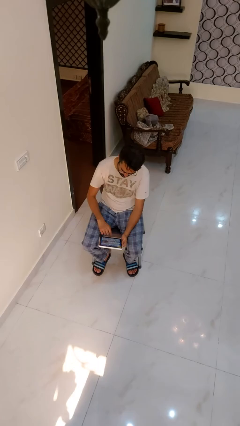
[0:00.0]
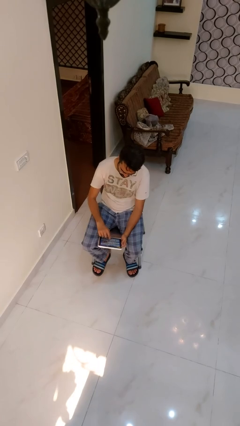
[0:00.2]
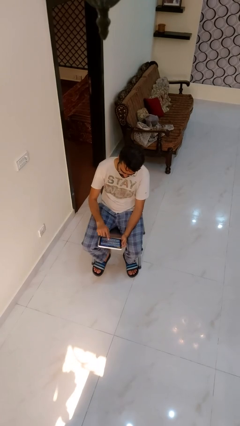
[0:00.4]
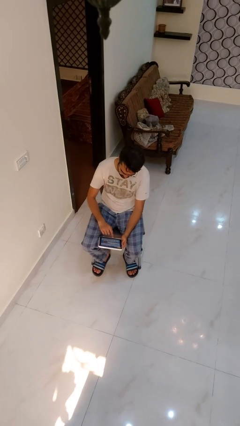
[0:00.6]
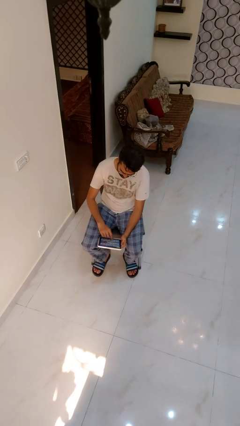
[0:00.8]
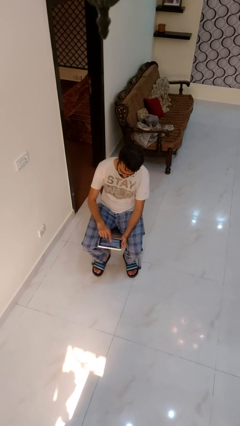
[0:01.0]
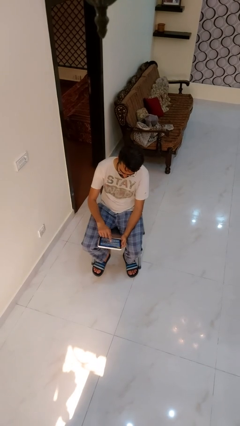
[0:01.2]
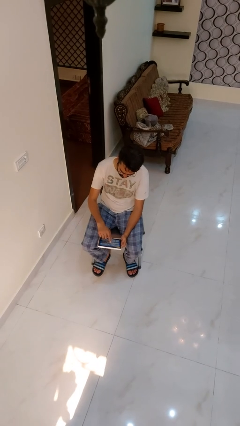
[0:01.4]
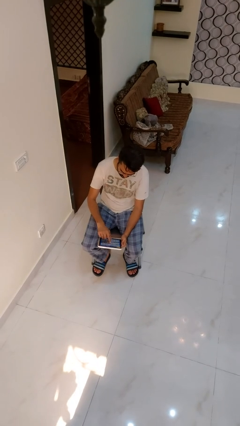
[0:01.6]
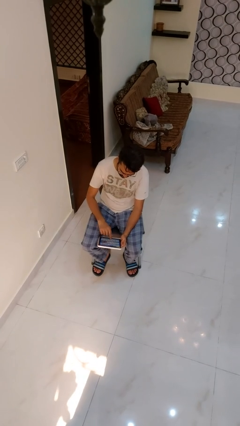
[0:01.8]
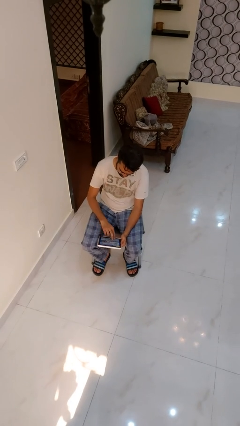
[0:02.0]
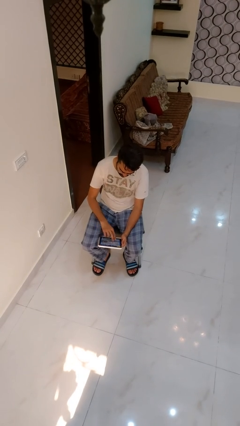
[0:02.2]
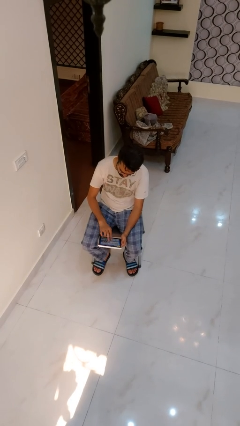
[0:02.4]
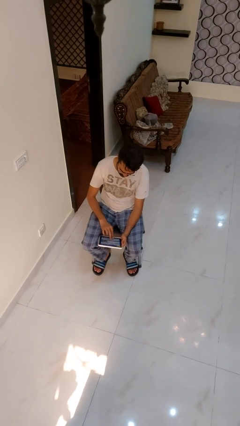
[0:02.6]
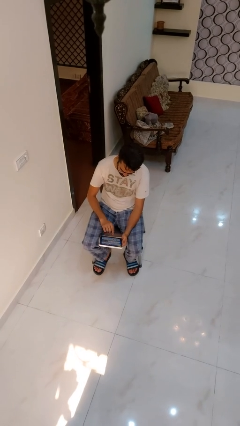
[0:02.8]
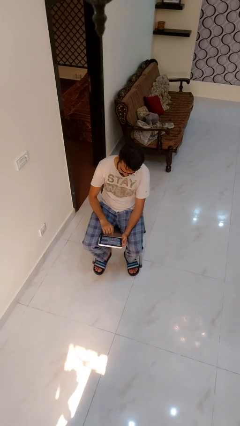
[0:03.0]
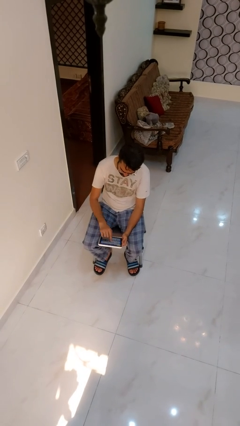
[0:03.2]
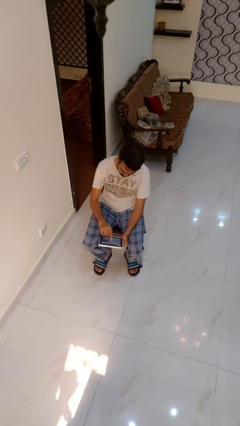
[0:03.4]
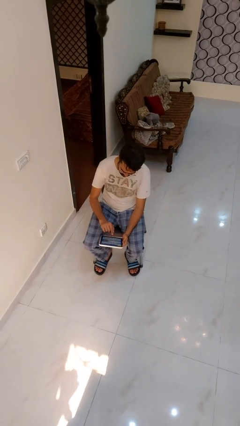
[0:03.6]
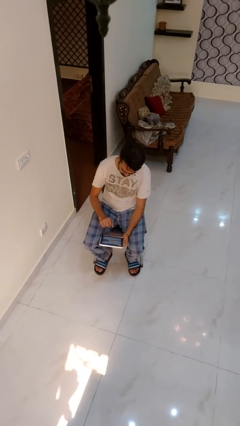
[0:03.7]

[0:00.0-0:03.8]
person interacts with tablet

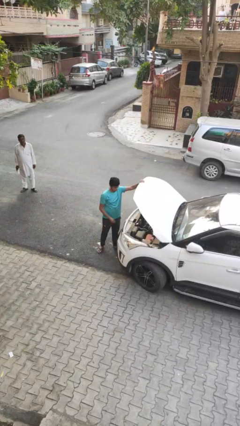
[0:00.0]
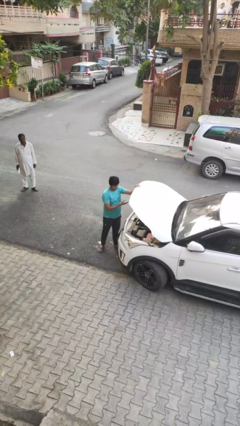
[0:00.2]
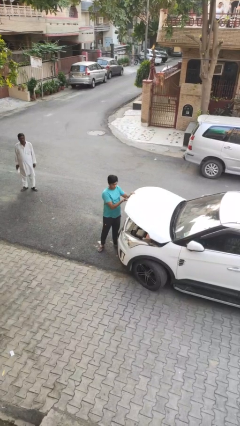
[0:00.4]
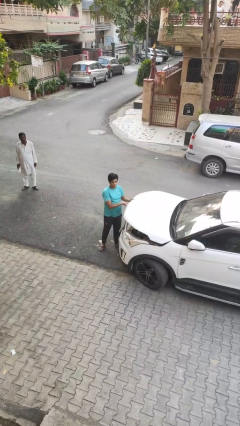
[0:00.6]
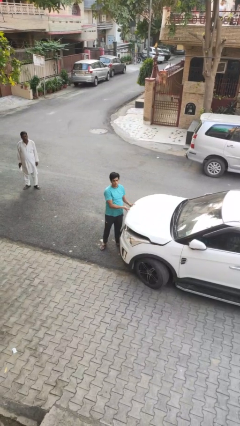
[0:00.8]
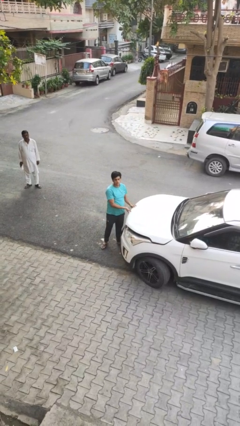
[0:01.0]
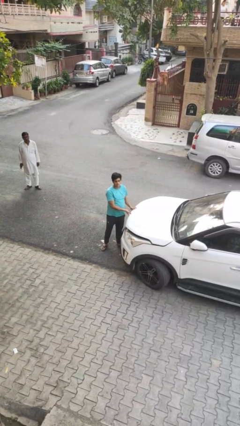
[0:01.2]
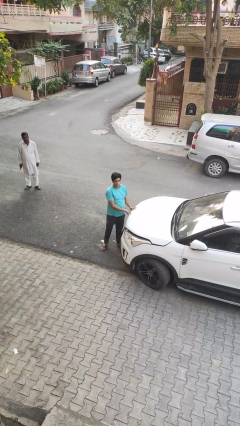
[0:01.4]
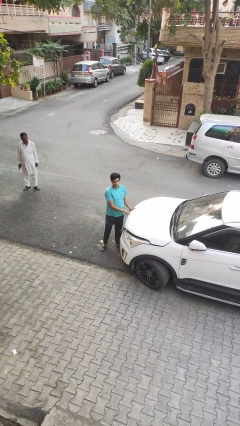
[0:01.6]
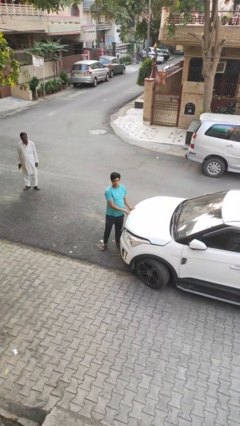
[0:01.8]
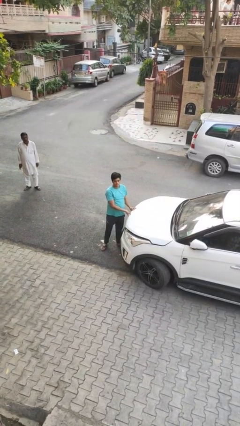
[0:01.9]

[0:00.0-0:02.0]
person closes car hood

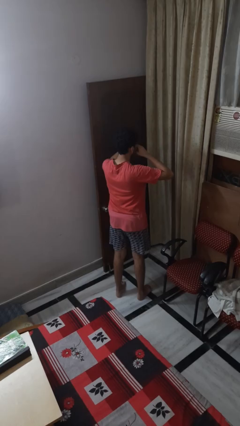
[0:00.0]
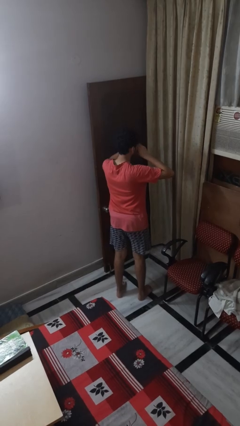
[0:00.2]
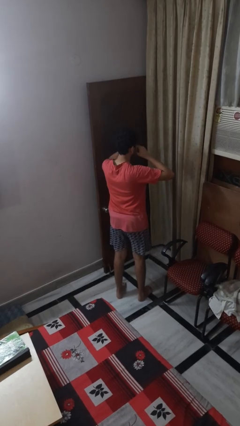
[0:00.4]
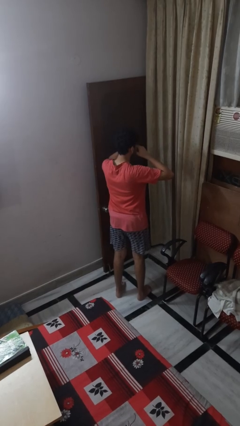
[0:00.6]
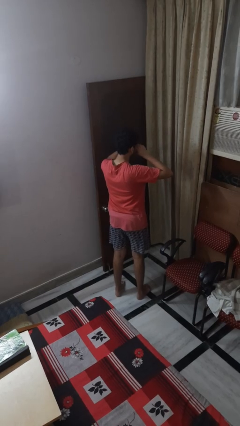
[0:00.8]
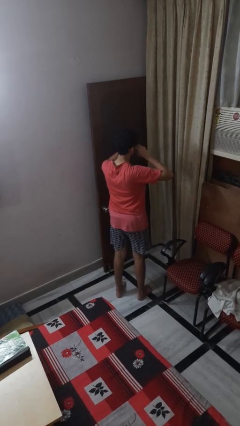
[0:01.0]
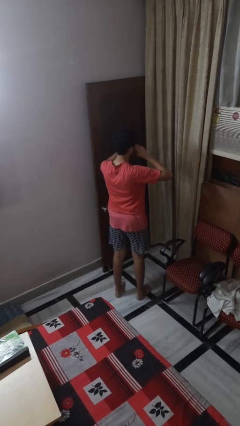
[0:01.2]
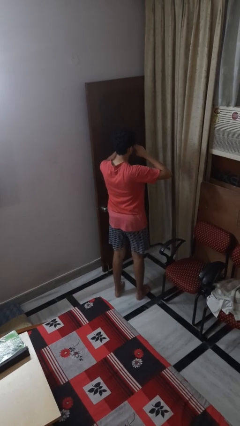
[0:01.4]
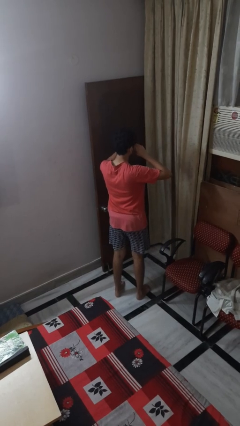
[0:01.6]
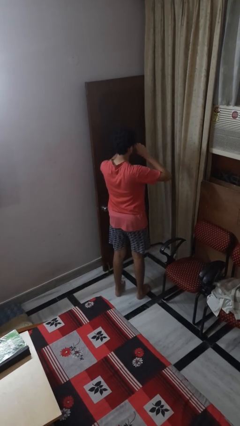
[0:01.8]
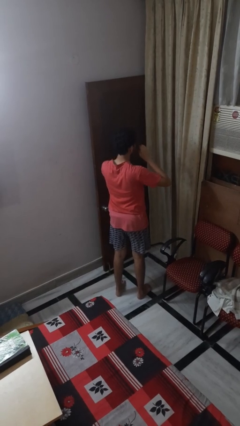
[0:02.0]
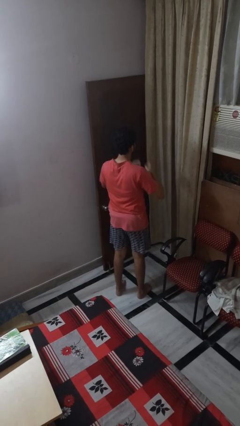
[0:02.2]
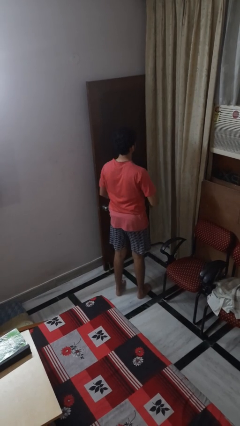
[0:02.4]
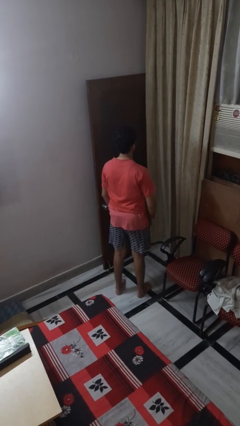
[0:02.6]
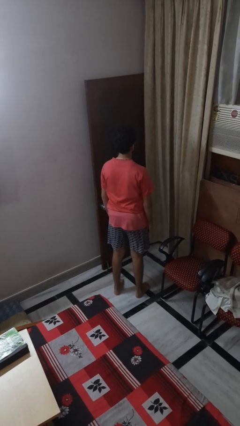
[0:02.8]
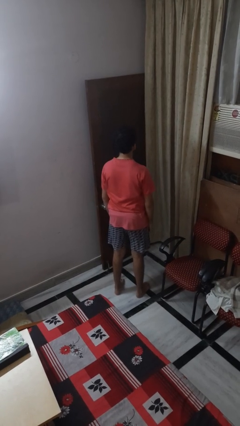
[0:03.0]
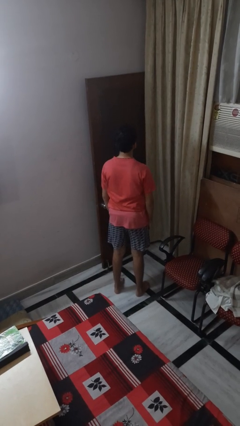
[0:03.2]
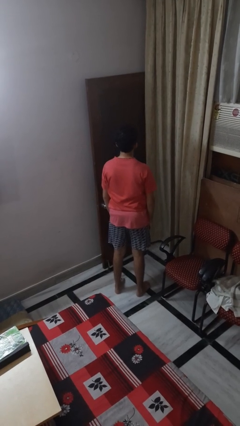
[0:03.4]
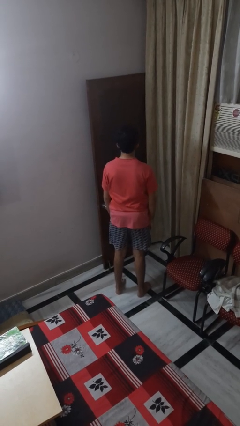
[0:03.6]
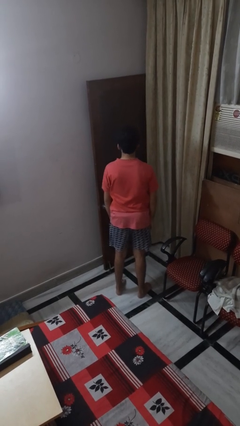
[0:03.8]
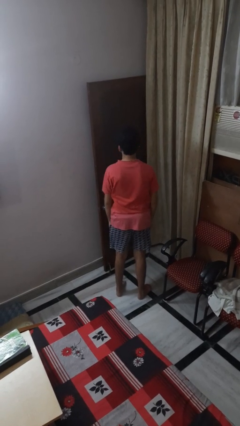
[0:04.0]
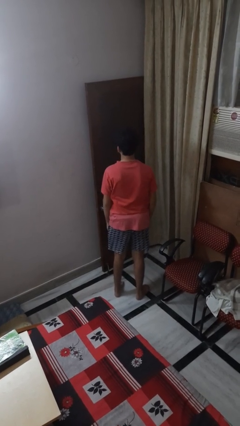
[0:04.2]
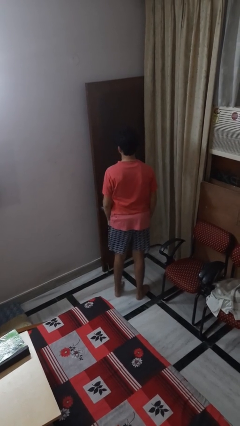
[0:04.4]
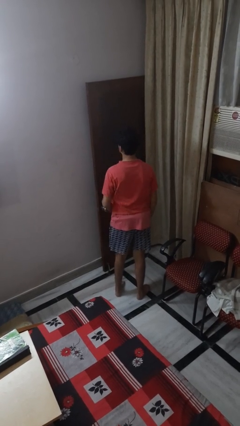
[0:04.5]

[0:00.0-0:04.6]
person rubs eyes

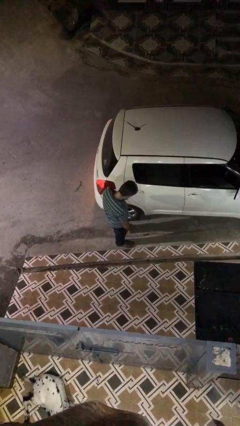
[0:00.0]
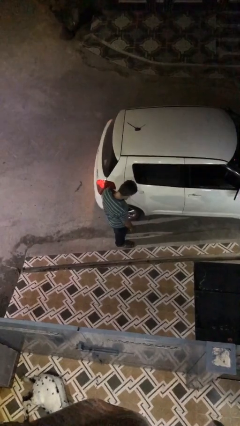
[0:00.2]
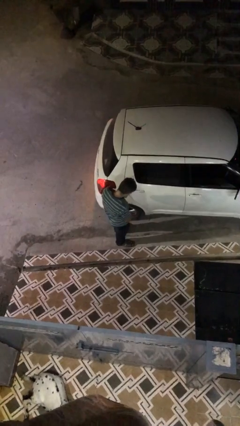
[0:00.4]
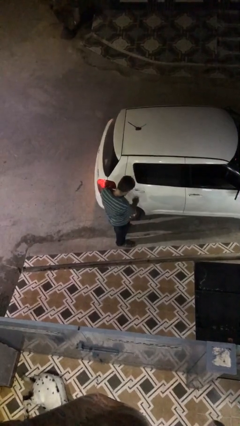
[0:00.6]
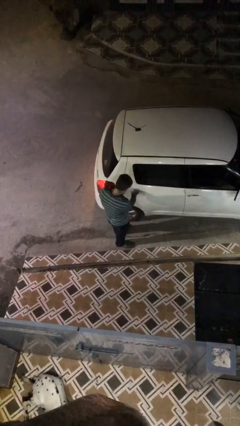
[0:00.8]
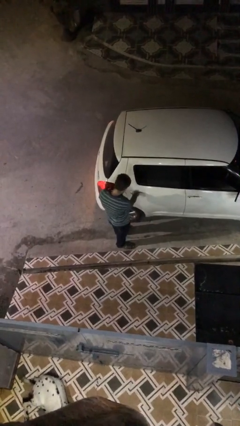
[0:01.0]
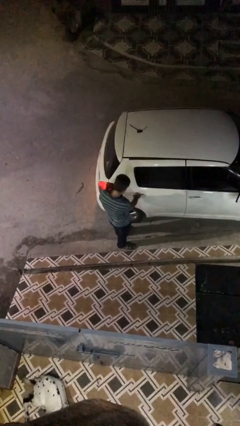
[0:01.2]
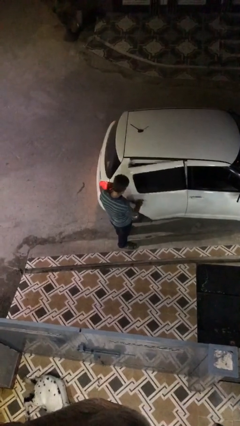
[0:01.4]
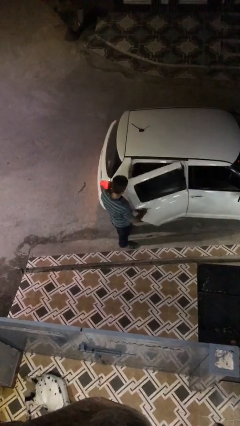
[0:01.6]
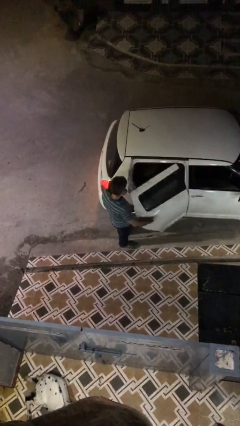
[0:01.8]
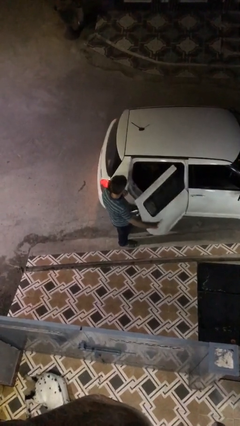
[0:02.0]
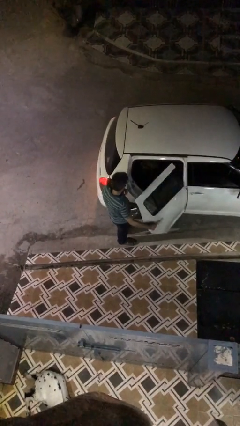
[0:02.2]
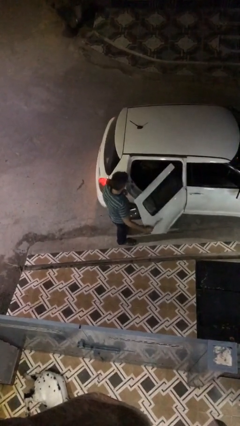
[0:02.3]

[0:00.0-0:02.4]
person opens car door

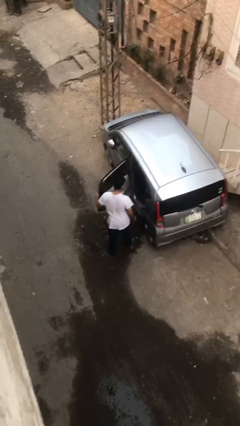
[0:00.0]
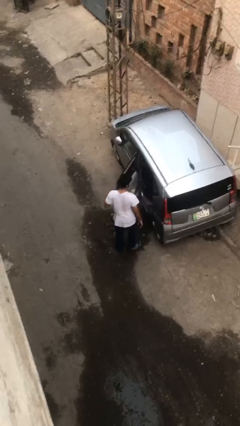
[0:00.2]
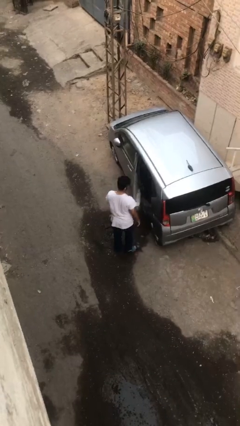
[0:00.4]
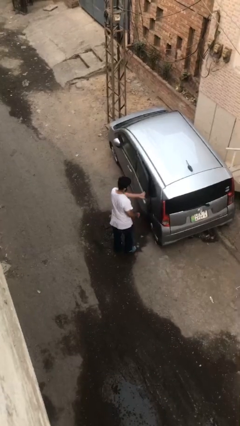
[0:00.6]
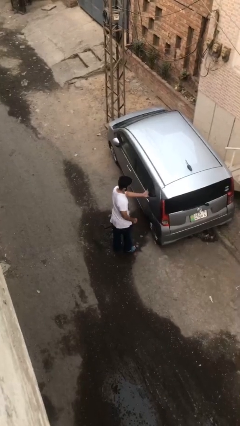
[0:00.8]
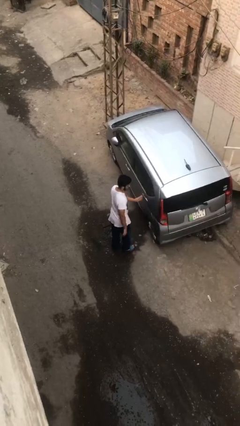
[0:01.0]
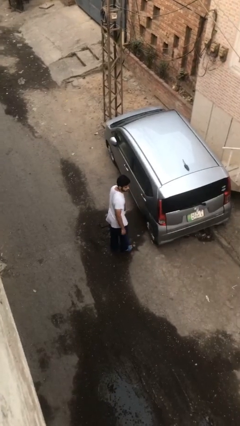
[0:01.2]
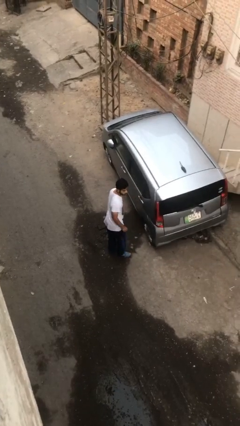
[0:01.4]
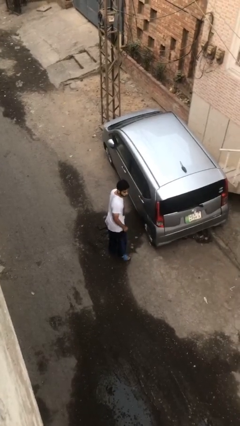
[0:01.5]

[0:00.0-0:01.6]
person closes car door

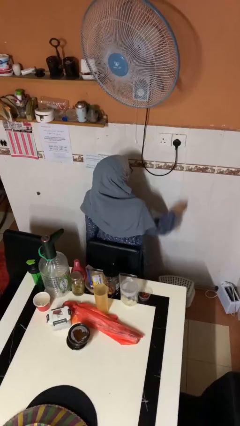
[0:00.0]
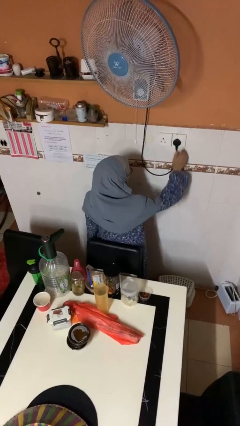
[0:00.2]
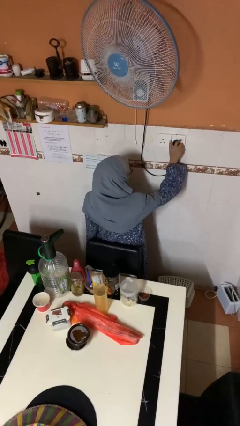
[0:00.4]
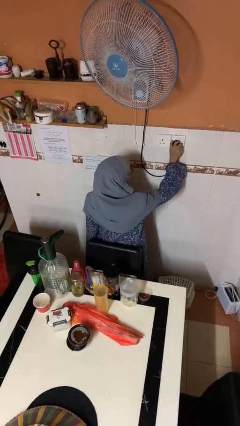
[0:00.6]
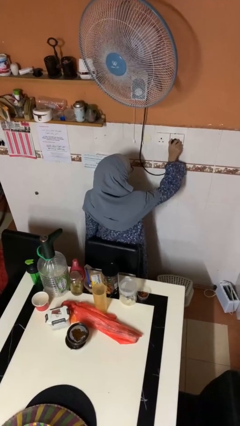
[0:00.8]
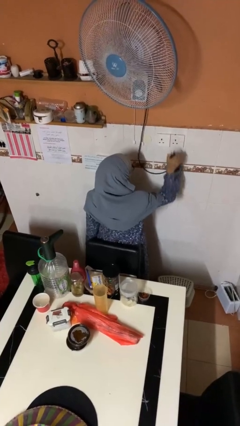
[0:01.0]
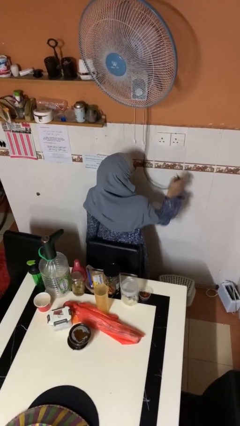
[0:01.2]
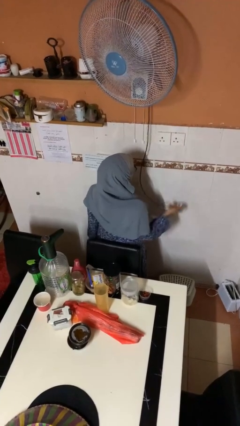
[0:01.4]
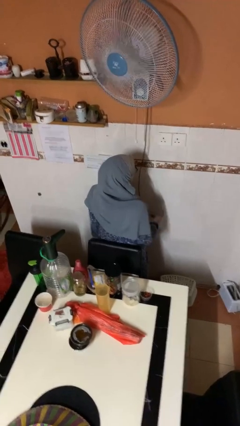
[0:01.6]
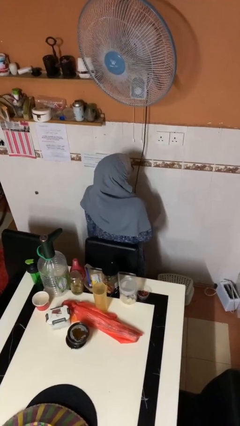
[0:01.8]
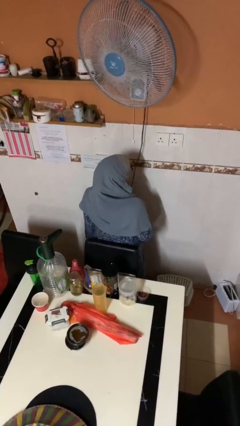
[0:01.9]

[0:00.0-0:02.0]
person unplugs from electrical socket

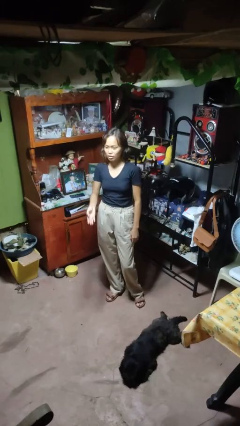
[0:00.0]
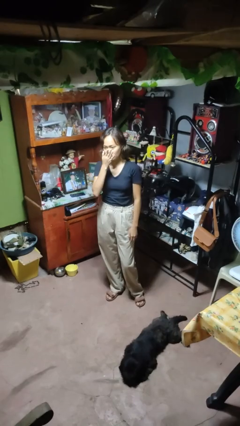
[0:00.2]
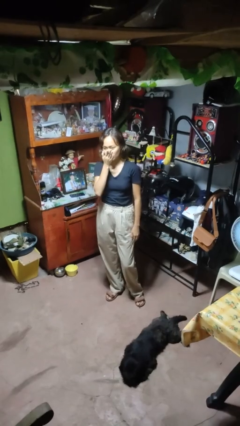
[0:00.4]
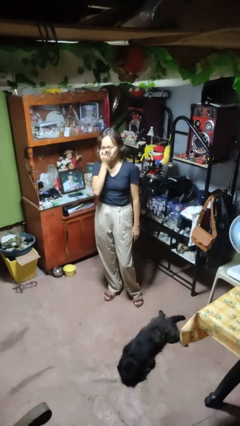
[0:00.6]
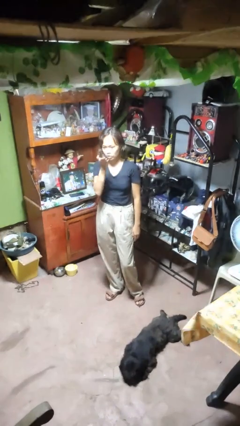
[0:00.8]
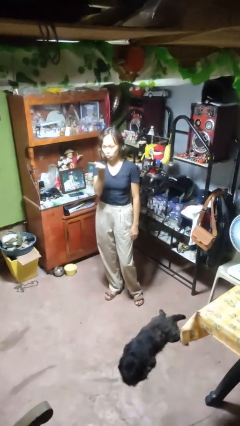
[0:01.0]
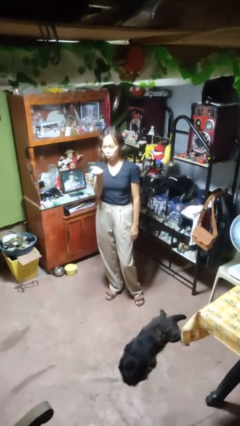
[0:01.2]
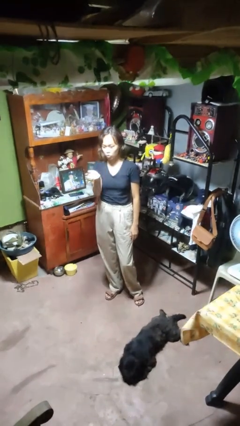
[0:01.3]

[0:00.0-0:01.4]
person gestures blow kiss
